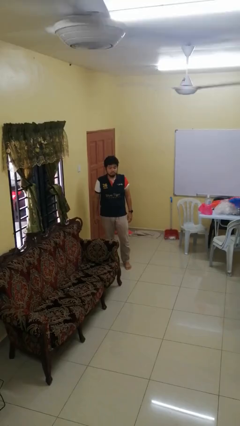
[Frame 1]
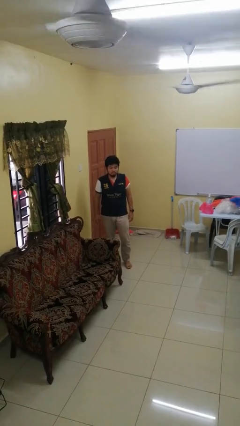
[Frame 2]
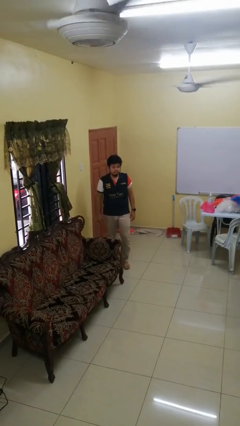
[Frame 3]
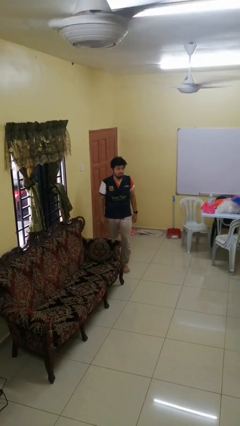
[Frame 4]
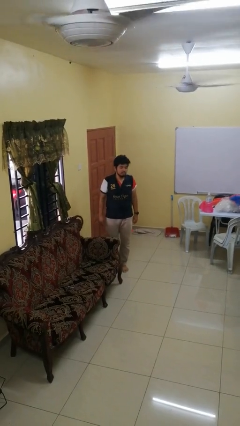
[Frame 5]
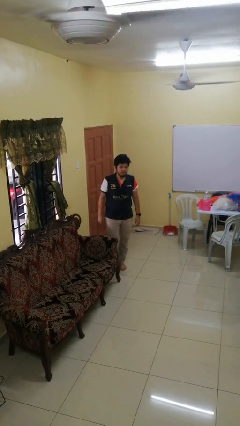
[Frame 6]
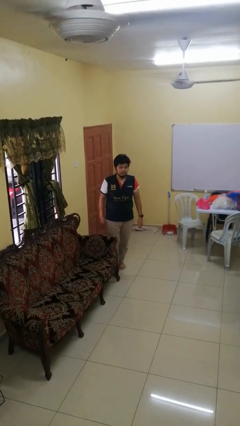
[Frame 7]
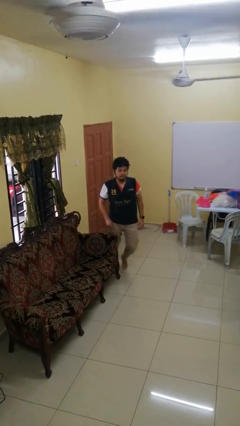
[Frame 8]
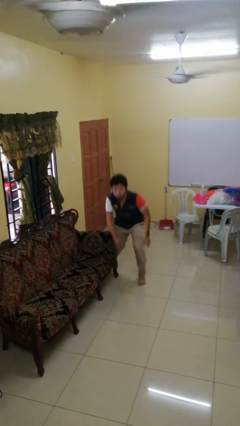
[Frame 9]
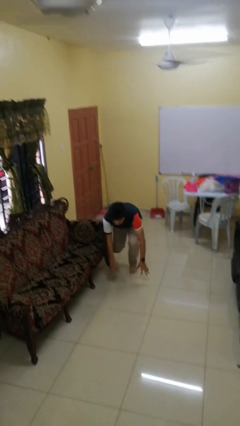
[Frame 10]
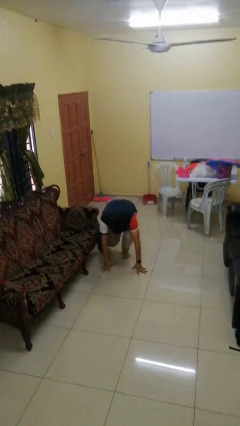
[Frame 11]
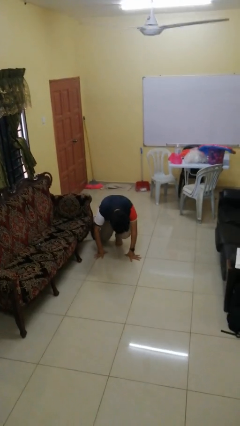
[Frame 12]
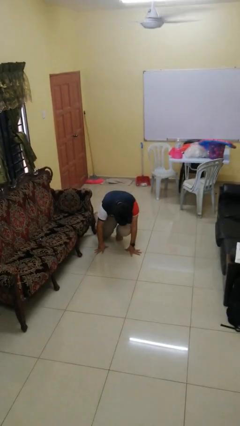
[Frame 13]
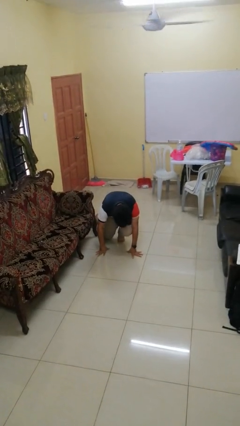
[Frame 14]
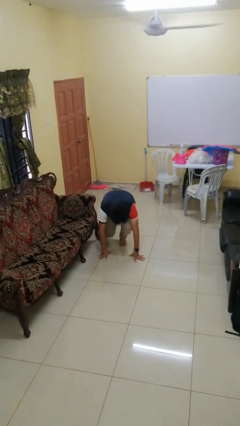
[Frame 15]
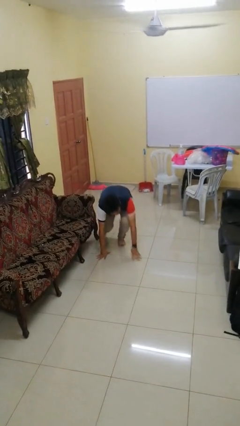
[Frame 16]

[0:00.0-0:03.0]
person trips on object on floor

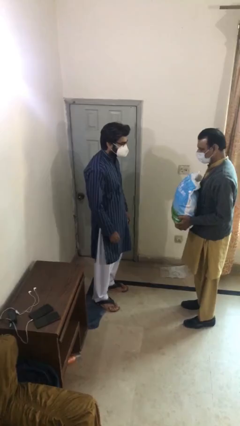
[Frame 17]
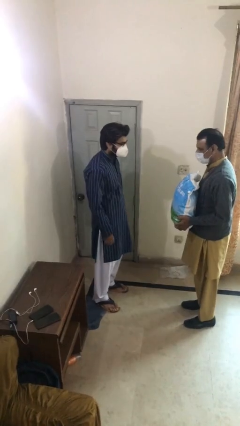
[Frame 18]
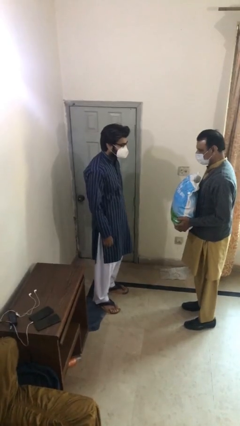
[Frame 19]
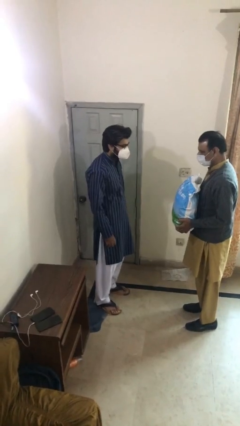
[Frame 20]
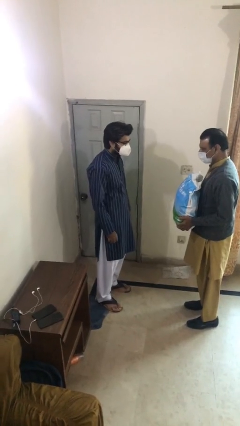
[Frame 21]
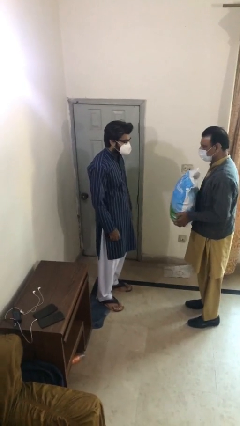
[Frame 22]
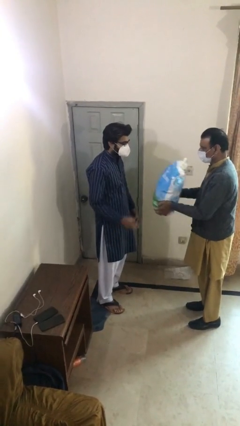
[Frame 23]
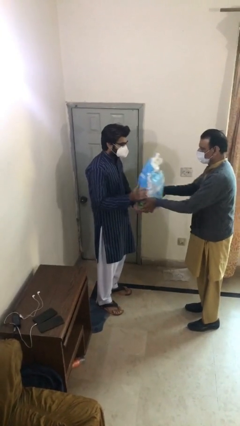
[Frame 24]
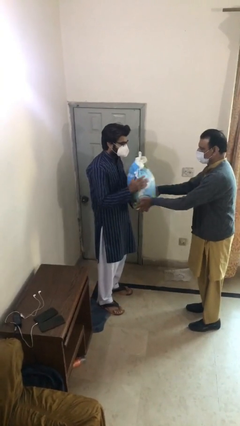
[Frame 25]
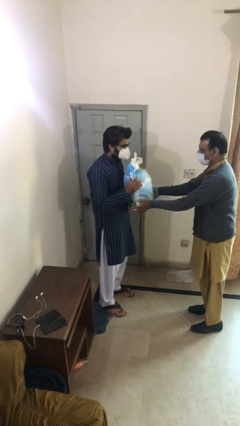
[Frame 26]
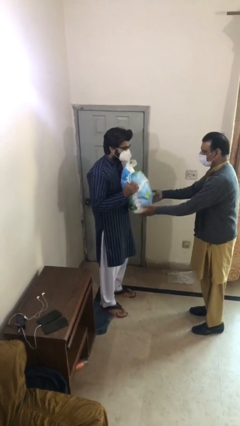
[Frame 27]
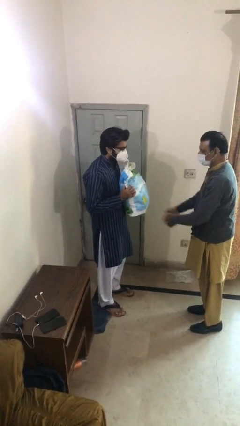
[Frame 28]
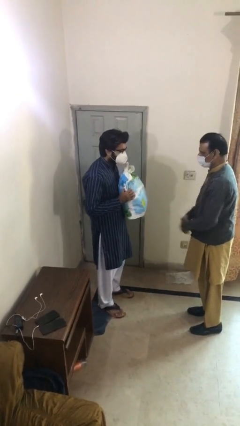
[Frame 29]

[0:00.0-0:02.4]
person transfers object to person

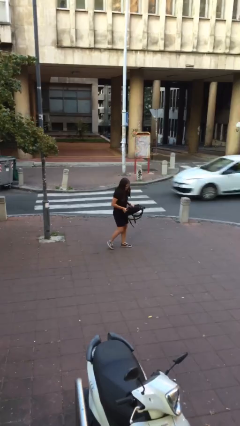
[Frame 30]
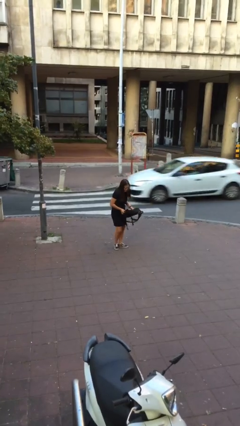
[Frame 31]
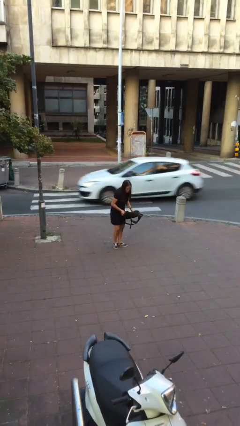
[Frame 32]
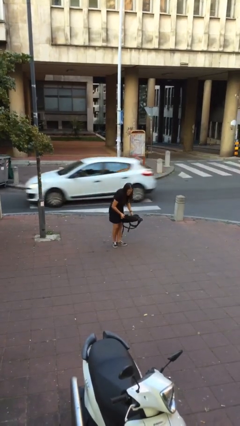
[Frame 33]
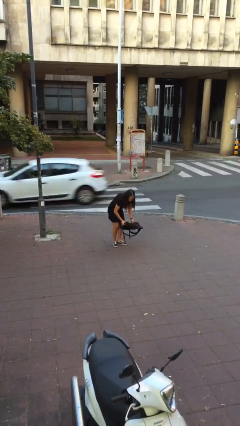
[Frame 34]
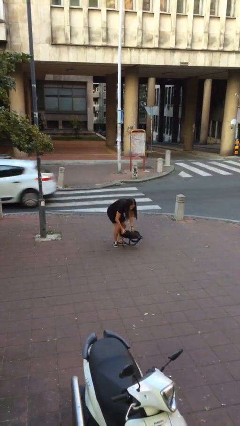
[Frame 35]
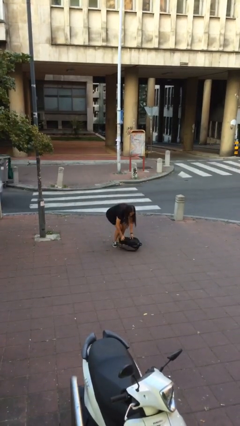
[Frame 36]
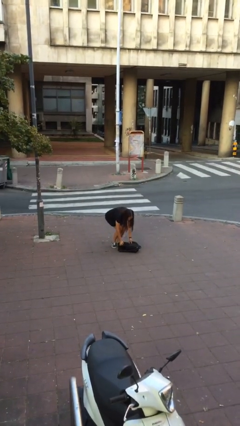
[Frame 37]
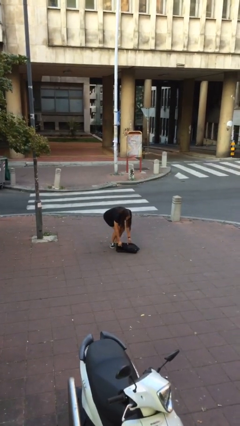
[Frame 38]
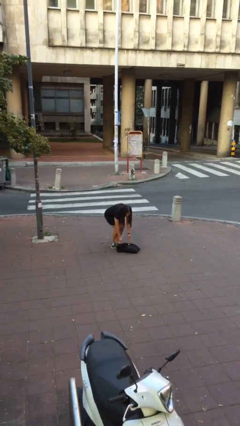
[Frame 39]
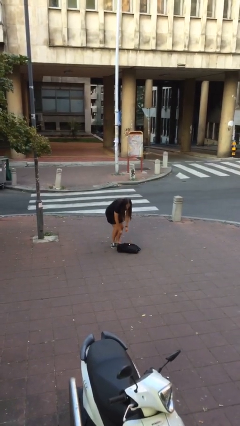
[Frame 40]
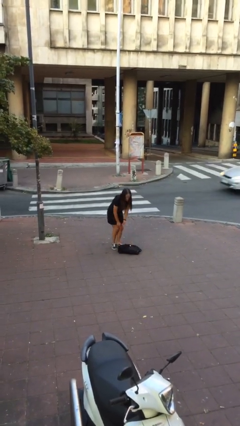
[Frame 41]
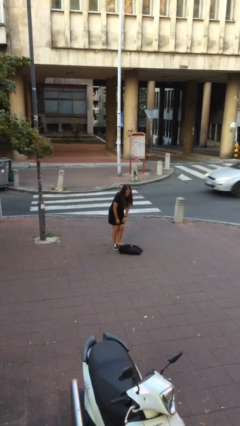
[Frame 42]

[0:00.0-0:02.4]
person puts down object on floor

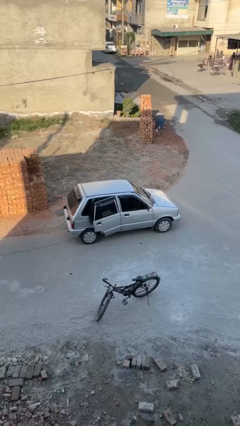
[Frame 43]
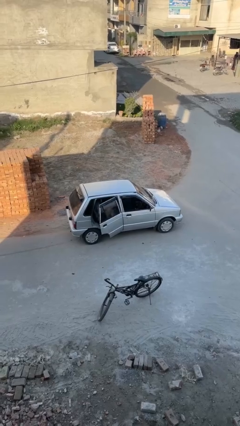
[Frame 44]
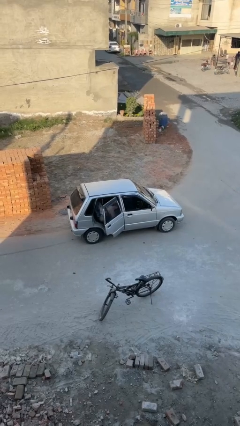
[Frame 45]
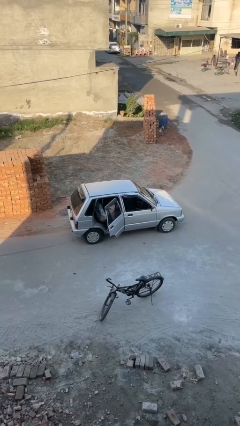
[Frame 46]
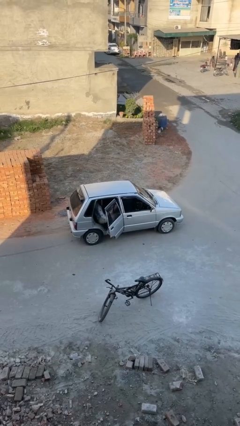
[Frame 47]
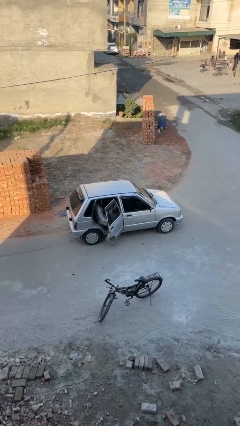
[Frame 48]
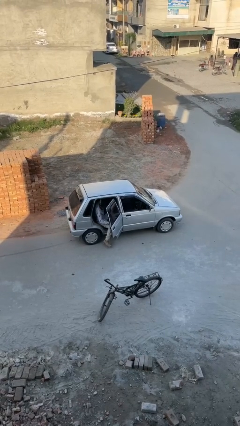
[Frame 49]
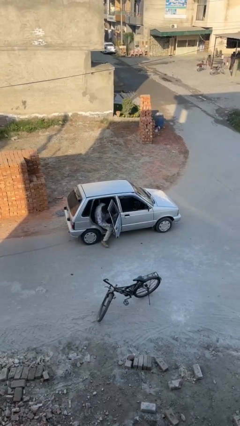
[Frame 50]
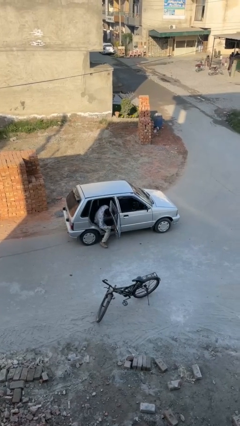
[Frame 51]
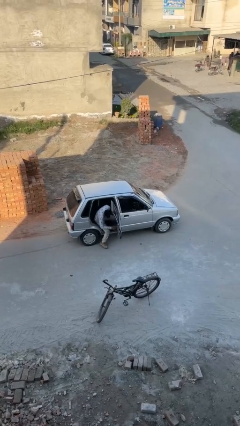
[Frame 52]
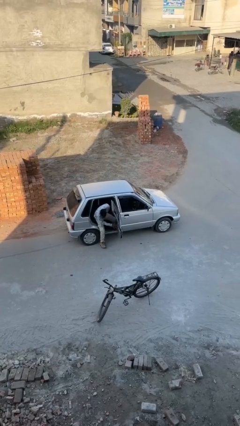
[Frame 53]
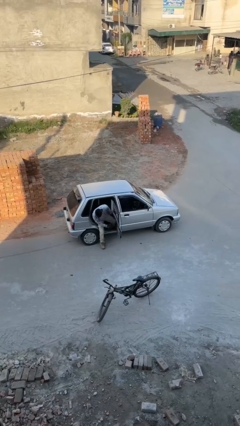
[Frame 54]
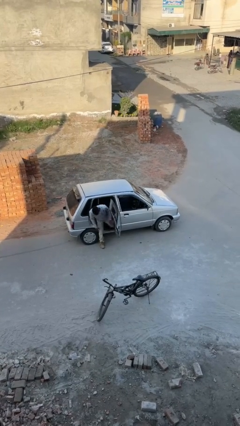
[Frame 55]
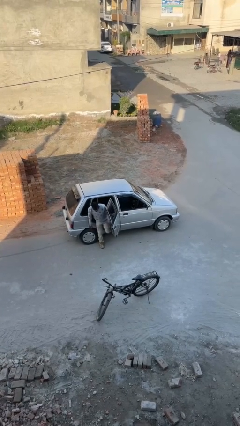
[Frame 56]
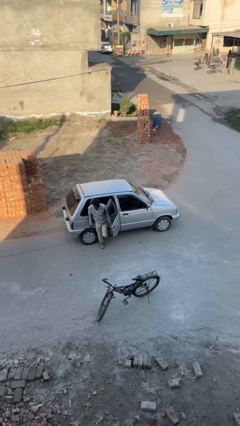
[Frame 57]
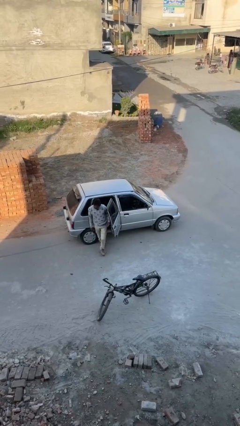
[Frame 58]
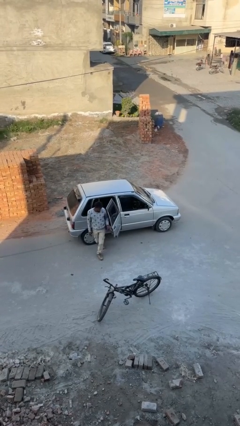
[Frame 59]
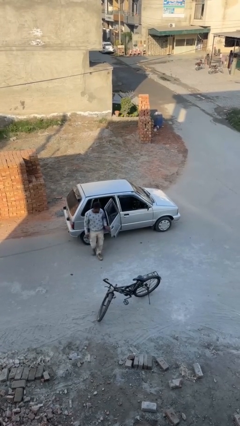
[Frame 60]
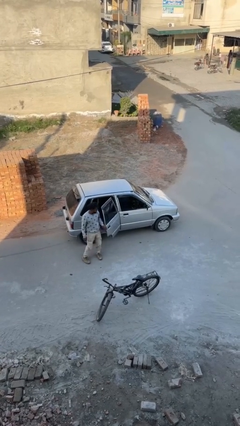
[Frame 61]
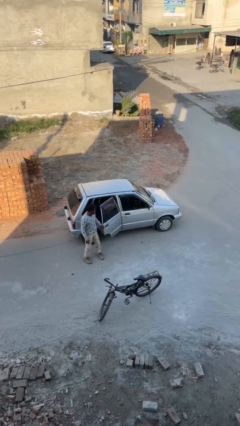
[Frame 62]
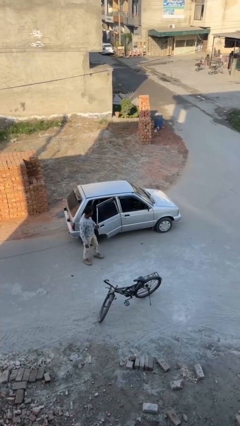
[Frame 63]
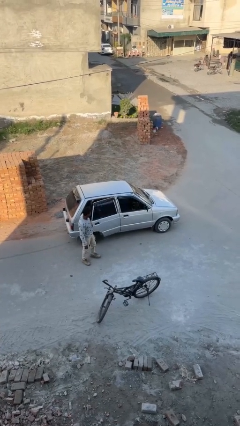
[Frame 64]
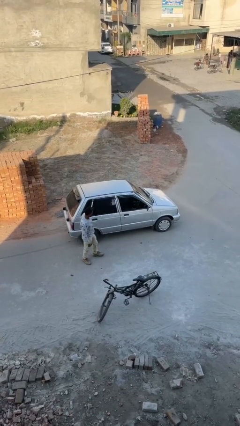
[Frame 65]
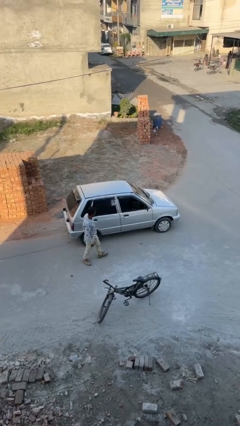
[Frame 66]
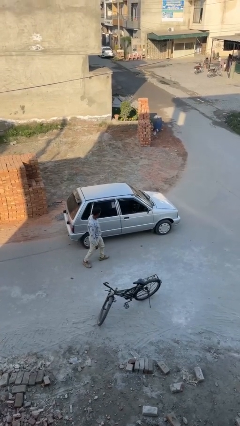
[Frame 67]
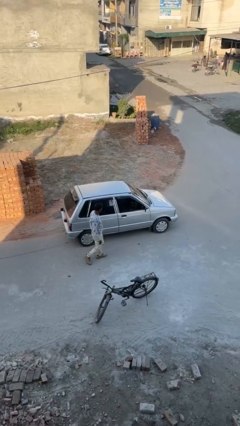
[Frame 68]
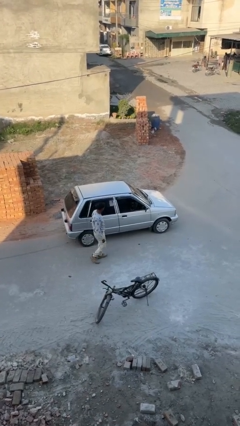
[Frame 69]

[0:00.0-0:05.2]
car drops off person

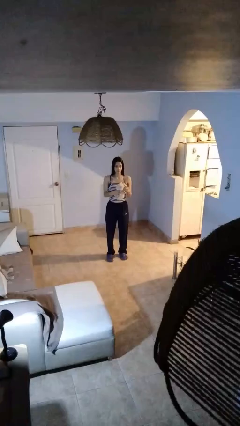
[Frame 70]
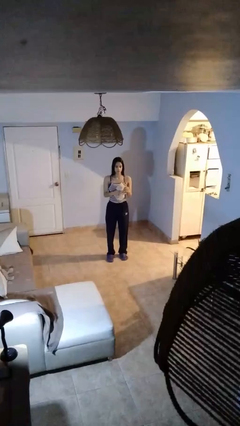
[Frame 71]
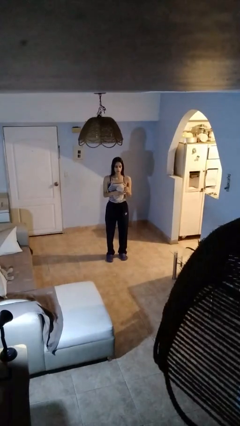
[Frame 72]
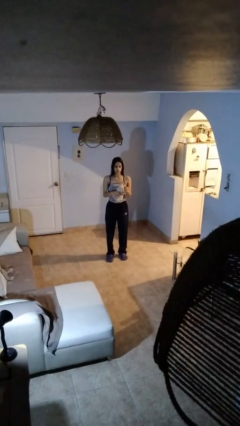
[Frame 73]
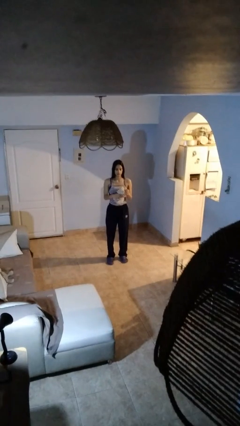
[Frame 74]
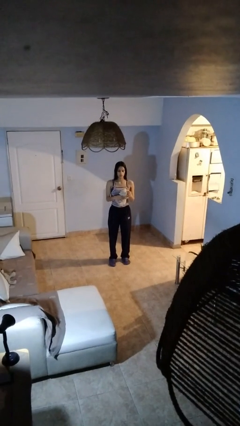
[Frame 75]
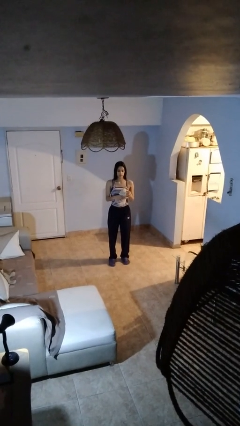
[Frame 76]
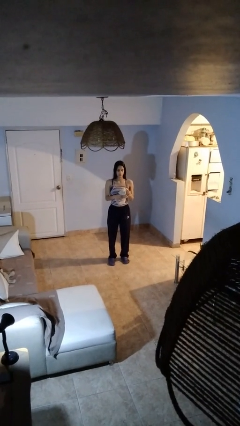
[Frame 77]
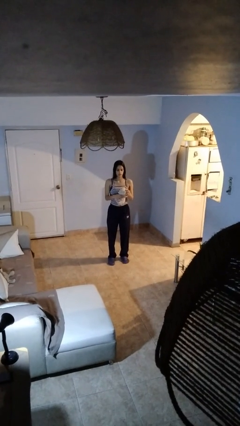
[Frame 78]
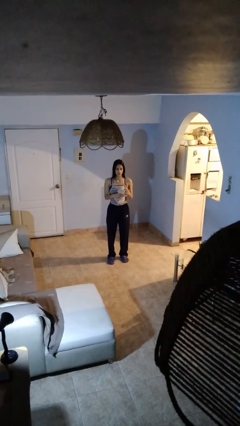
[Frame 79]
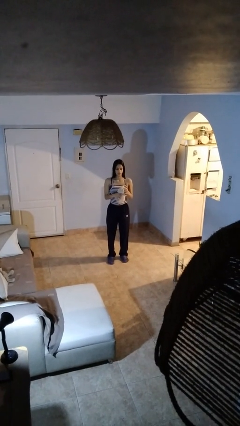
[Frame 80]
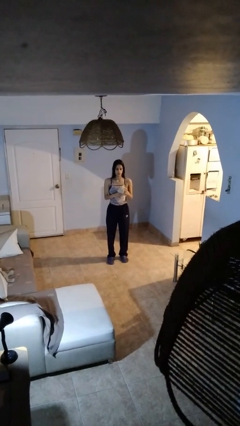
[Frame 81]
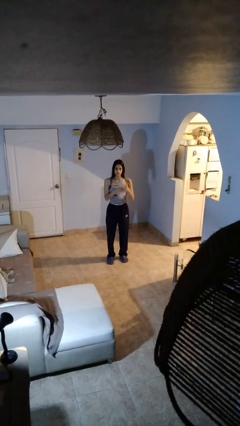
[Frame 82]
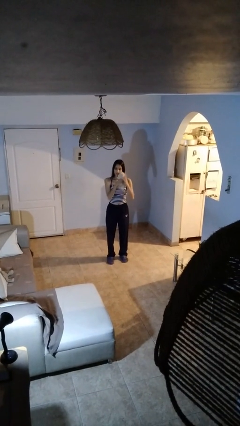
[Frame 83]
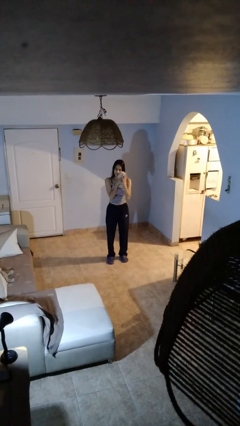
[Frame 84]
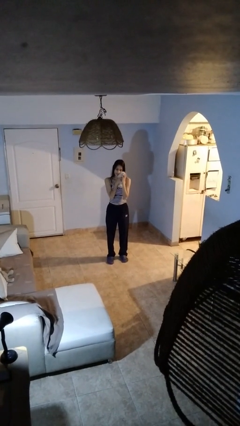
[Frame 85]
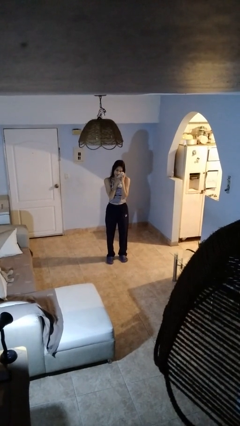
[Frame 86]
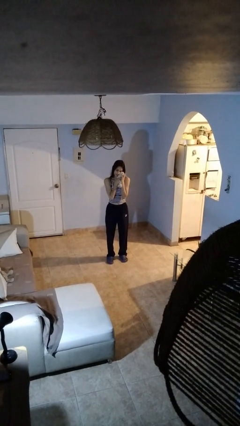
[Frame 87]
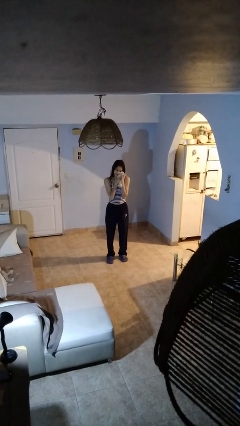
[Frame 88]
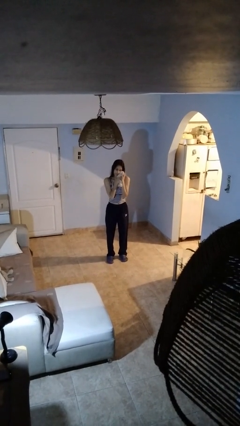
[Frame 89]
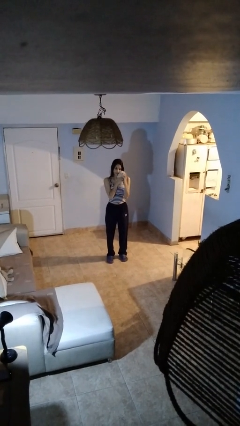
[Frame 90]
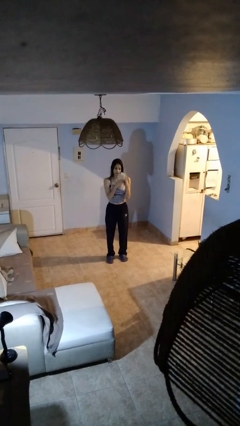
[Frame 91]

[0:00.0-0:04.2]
person hugs stuffed animal

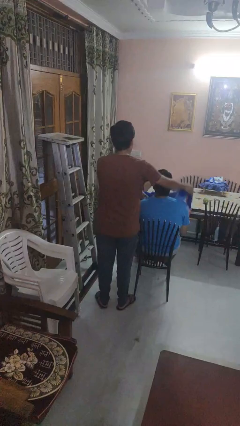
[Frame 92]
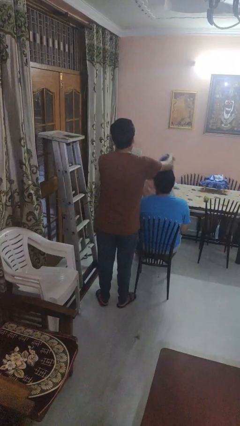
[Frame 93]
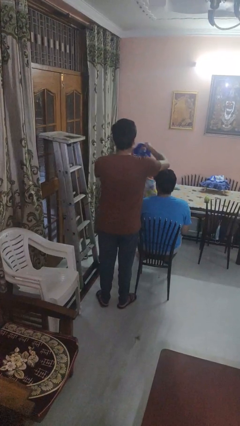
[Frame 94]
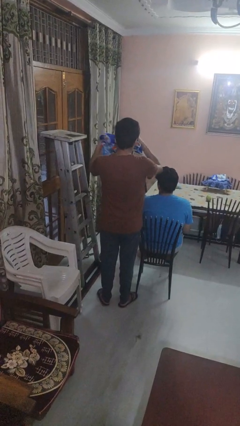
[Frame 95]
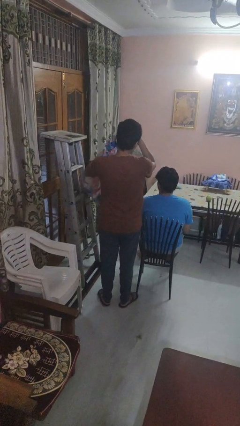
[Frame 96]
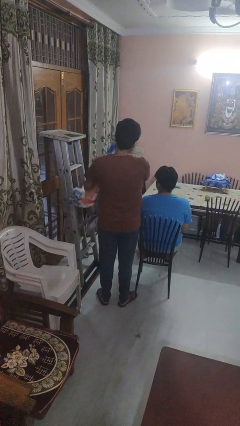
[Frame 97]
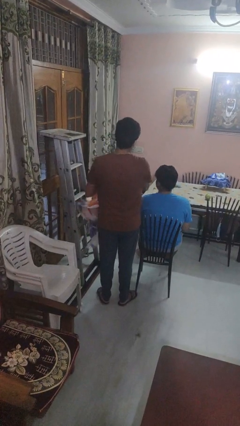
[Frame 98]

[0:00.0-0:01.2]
person uncovers friend with blanket
